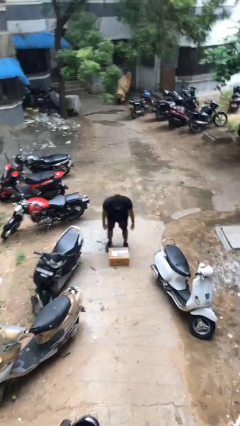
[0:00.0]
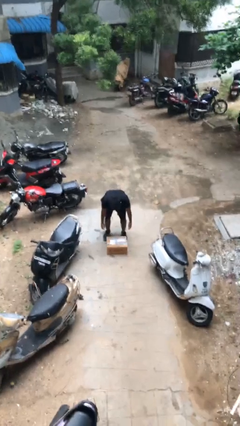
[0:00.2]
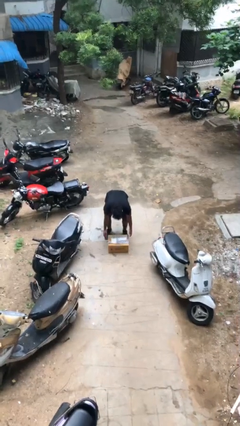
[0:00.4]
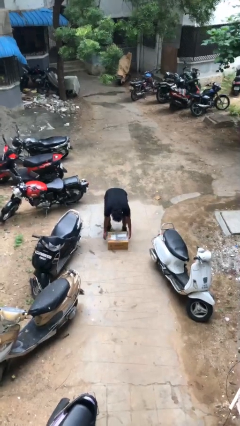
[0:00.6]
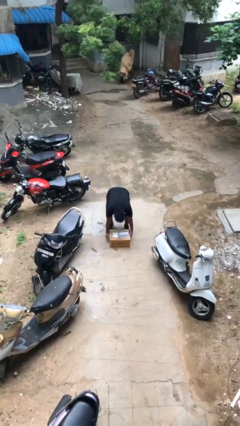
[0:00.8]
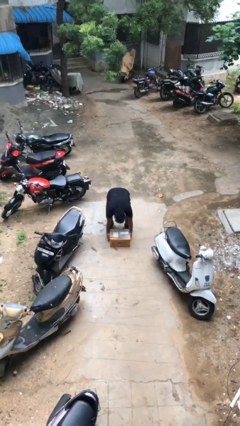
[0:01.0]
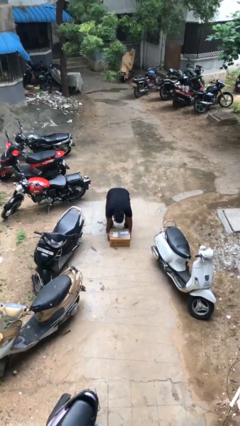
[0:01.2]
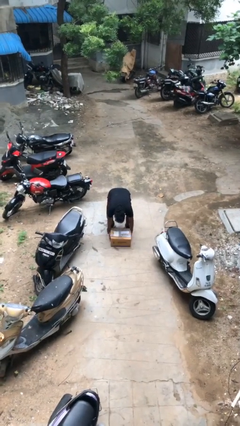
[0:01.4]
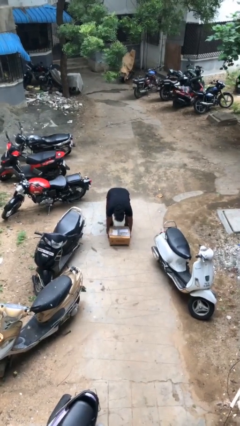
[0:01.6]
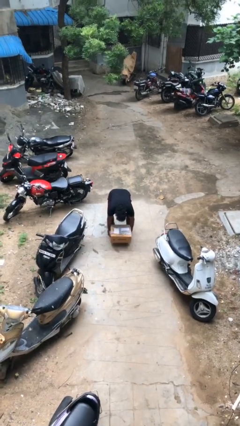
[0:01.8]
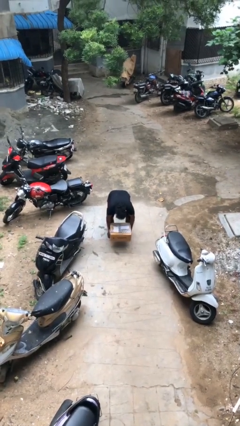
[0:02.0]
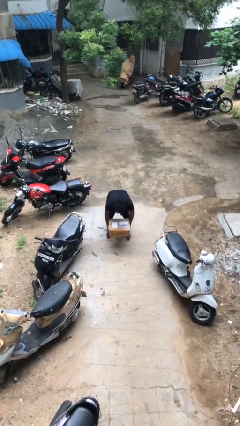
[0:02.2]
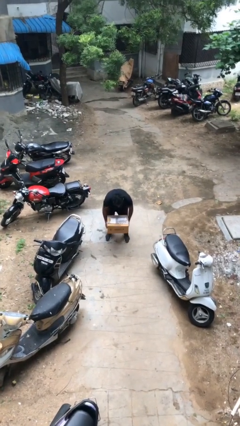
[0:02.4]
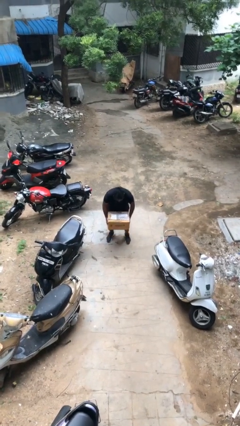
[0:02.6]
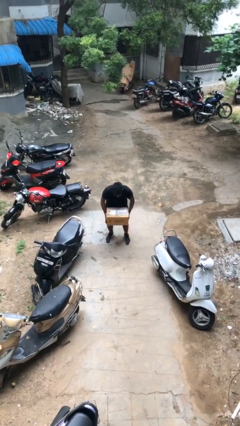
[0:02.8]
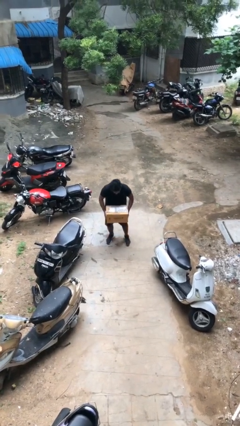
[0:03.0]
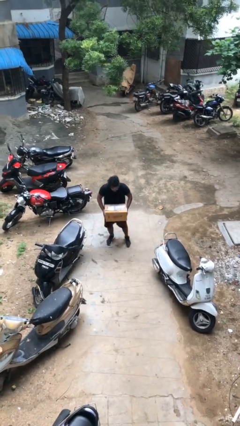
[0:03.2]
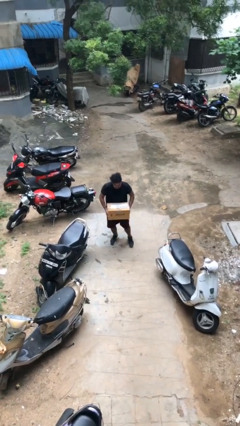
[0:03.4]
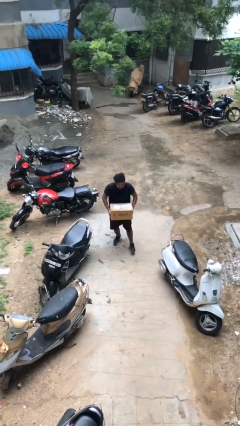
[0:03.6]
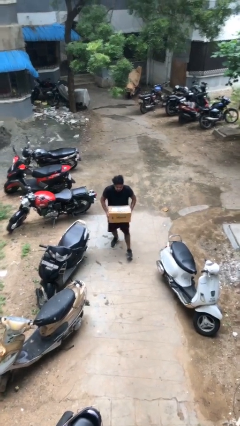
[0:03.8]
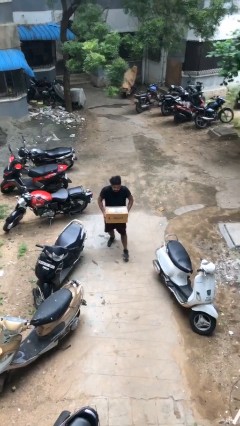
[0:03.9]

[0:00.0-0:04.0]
person picks up object from floor

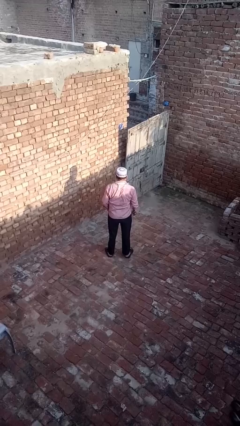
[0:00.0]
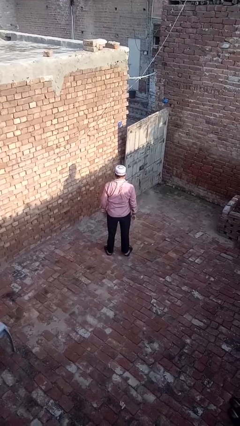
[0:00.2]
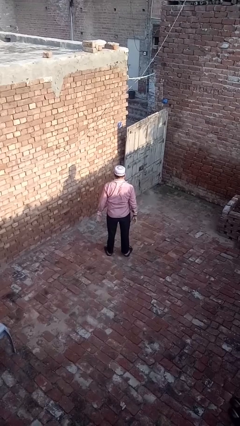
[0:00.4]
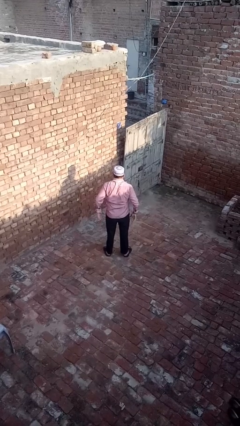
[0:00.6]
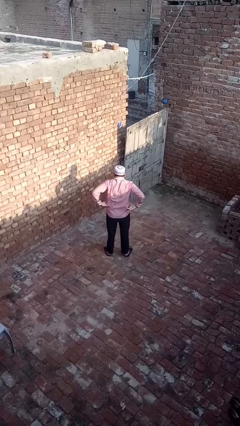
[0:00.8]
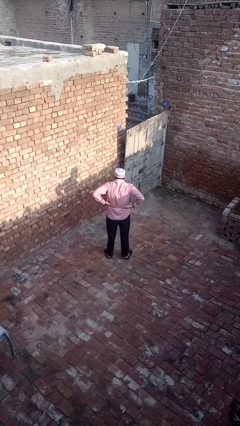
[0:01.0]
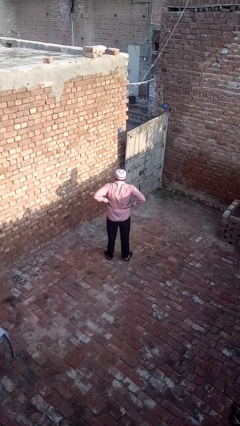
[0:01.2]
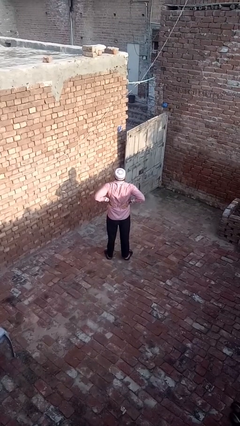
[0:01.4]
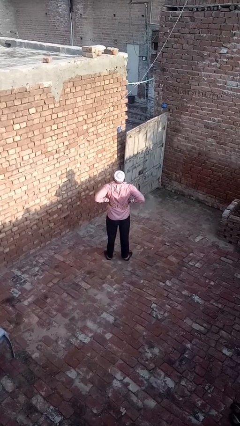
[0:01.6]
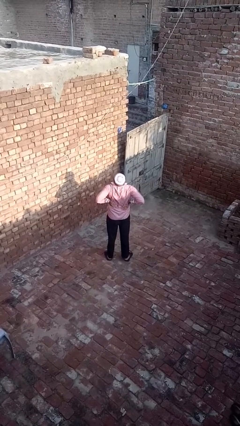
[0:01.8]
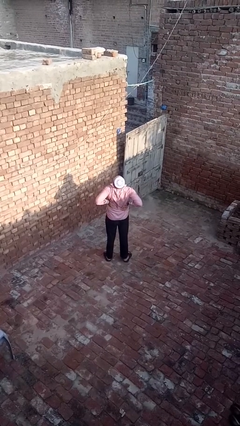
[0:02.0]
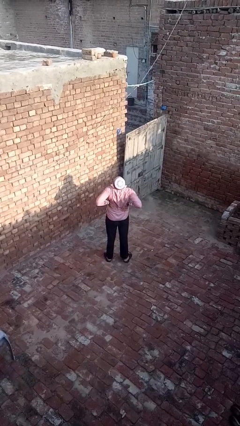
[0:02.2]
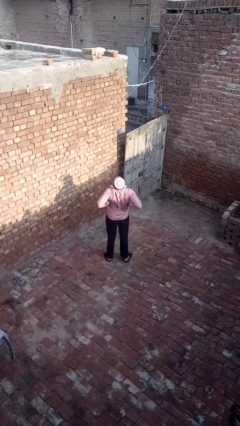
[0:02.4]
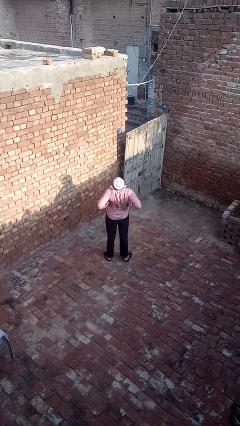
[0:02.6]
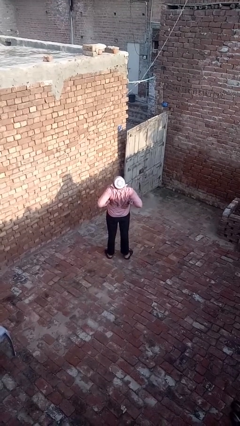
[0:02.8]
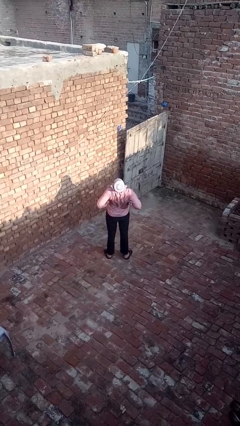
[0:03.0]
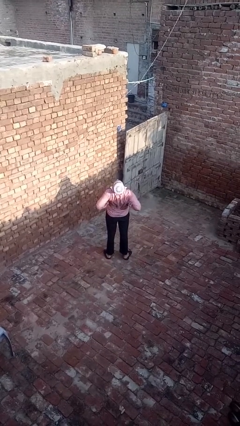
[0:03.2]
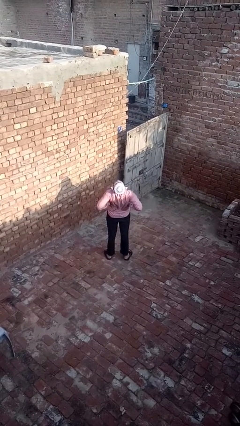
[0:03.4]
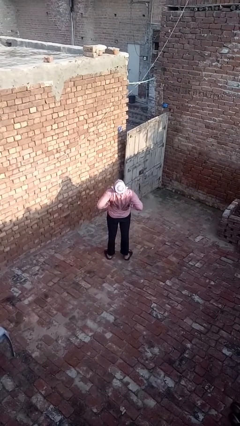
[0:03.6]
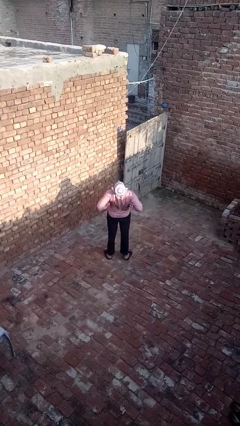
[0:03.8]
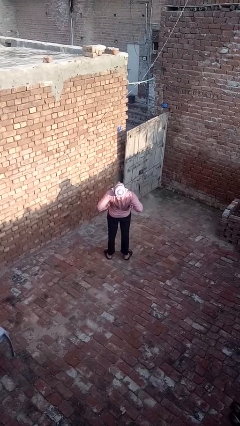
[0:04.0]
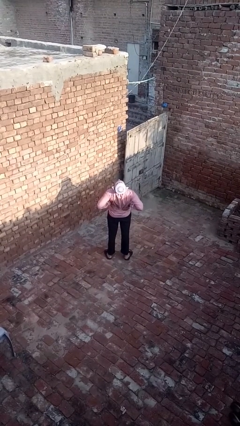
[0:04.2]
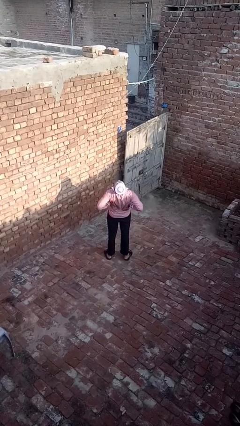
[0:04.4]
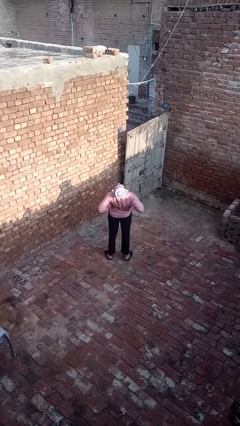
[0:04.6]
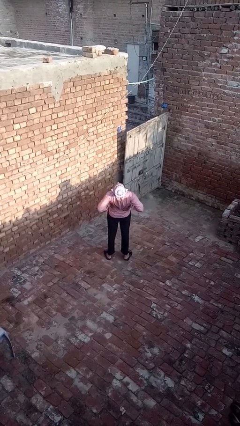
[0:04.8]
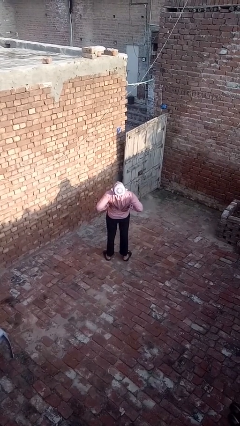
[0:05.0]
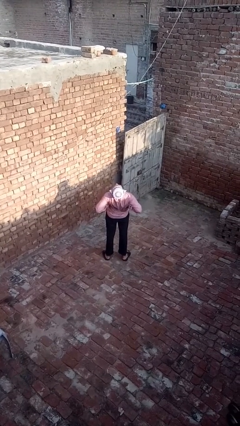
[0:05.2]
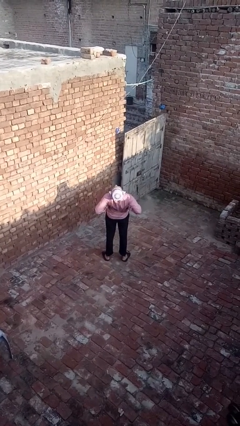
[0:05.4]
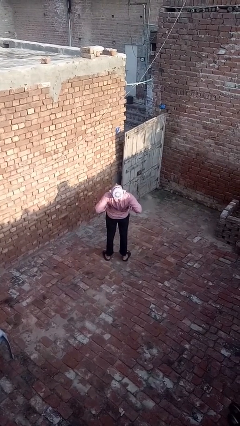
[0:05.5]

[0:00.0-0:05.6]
person stretches back

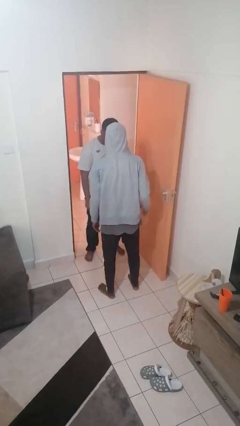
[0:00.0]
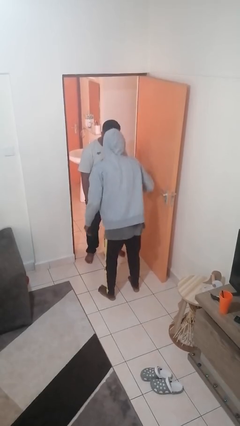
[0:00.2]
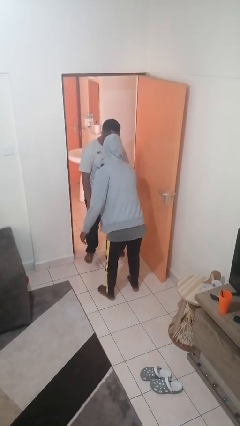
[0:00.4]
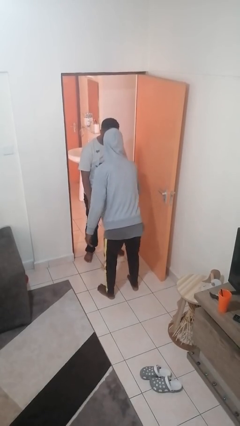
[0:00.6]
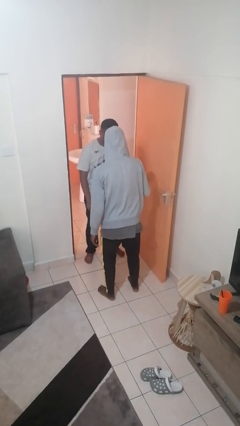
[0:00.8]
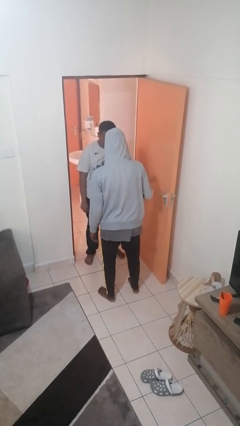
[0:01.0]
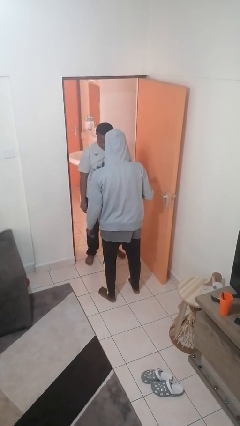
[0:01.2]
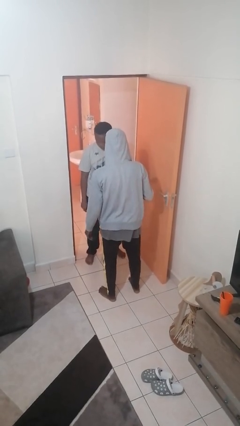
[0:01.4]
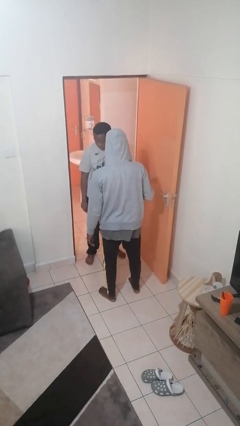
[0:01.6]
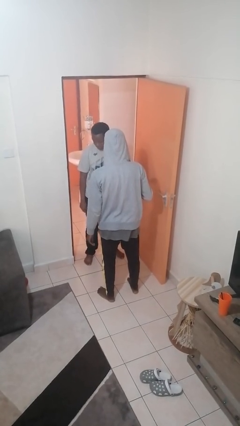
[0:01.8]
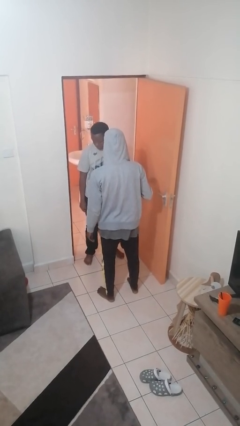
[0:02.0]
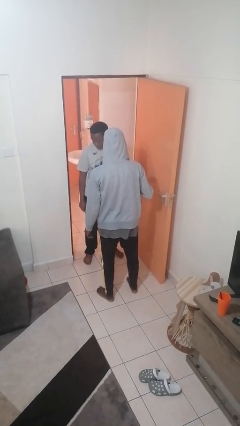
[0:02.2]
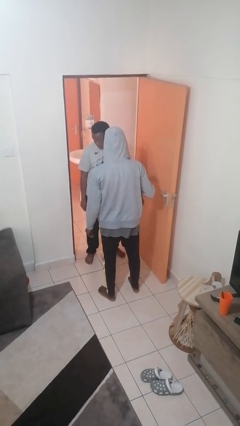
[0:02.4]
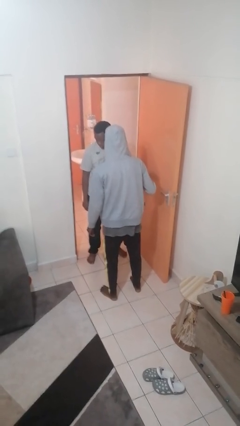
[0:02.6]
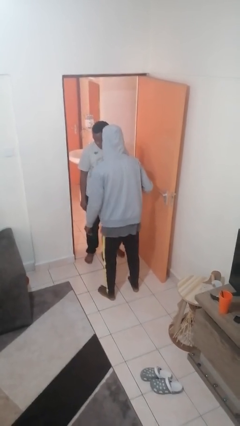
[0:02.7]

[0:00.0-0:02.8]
person grabs person by forearm

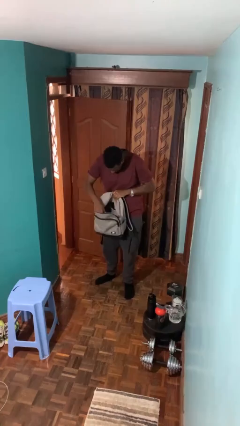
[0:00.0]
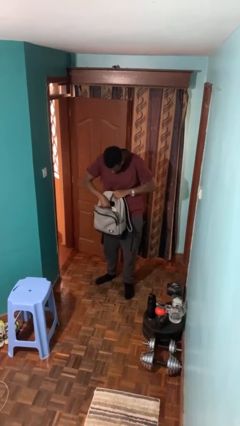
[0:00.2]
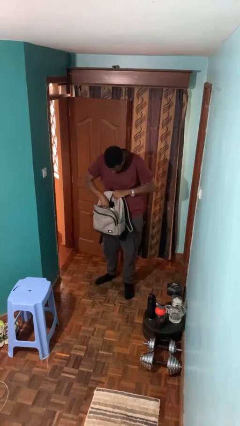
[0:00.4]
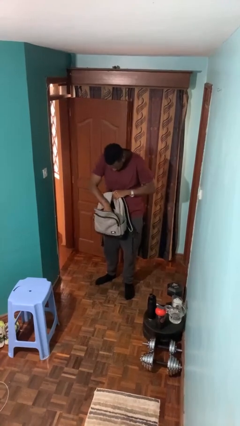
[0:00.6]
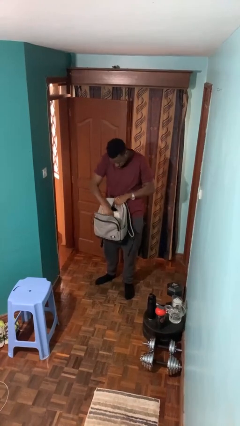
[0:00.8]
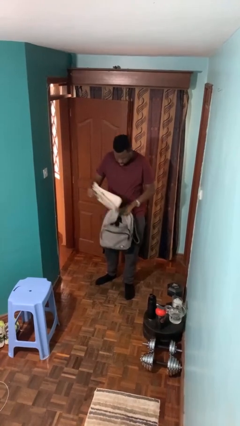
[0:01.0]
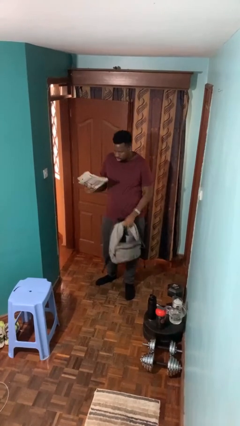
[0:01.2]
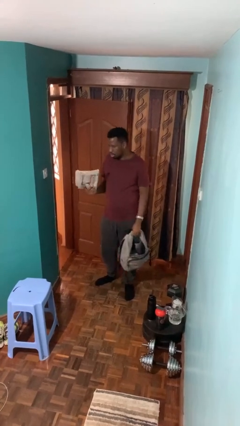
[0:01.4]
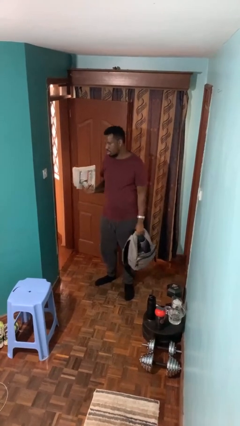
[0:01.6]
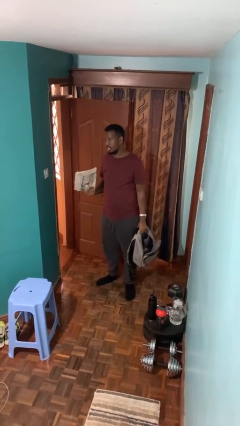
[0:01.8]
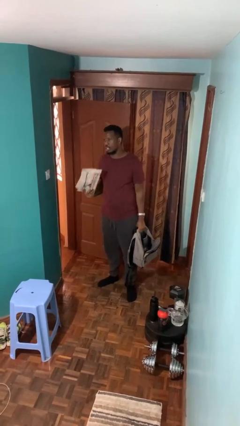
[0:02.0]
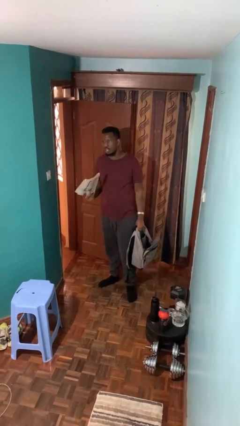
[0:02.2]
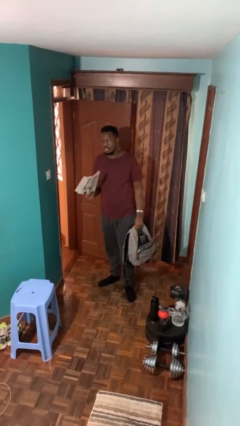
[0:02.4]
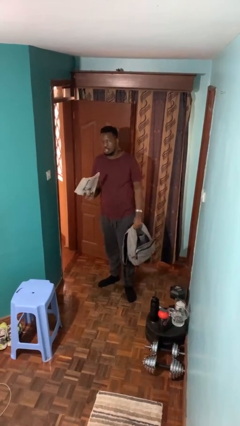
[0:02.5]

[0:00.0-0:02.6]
person takes object from backpack

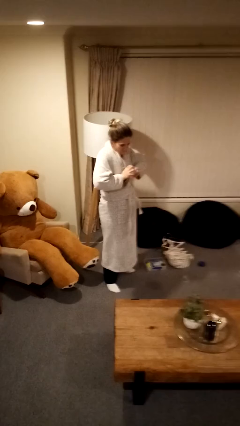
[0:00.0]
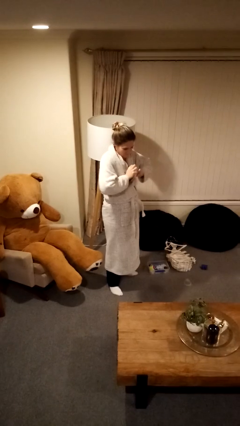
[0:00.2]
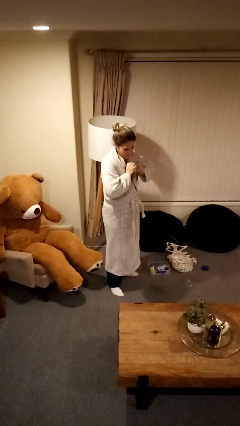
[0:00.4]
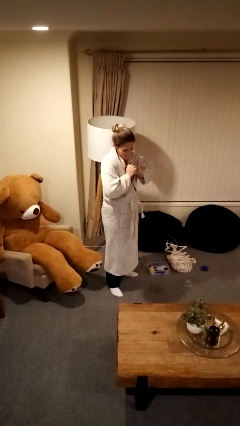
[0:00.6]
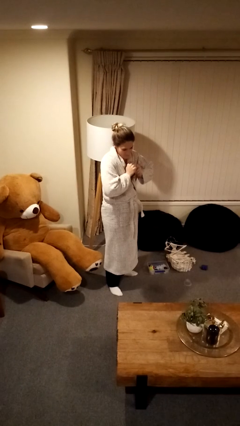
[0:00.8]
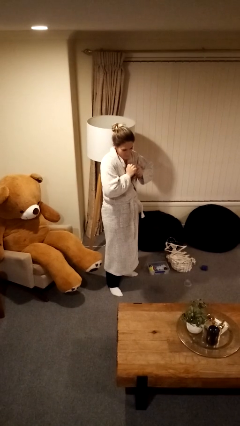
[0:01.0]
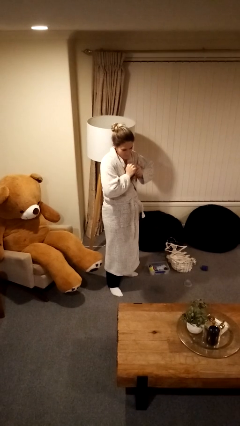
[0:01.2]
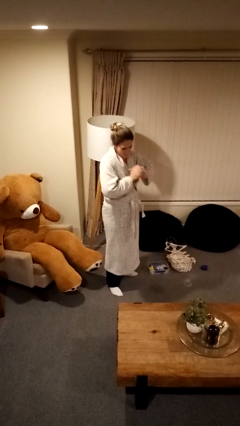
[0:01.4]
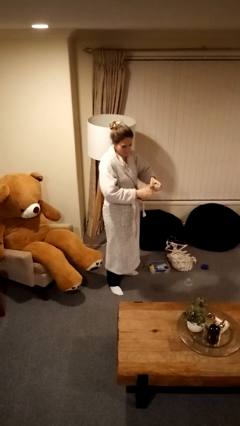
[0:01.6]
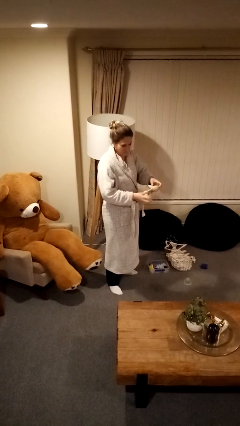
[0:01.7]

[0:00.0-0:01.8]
person squeezes object

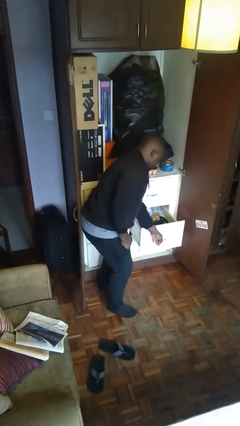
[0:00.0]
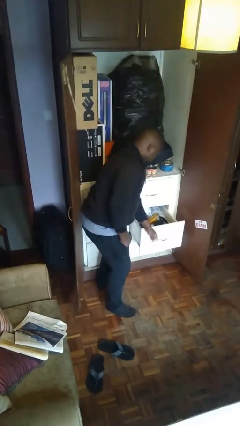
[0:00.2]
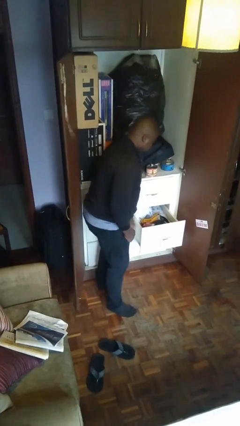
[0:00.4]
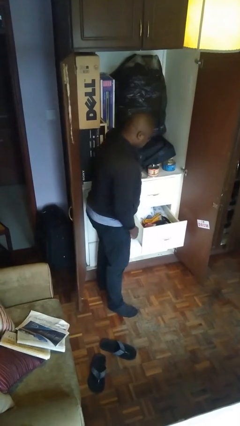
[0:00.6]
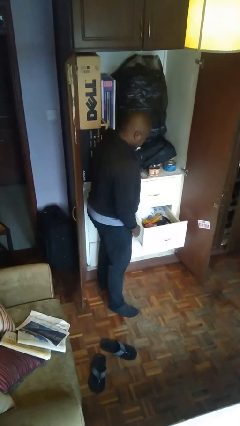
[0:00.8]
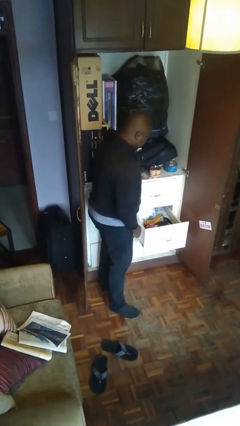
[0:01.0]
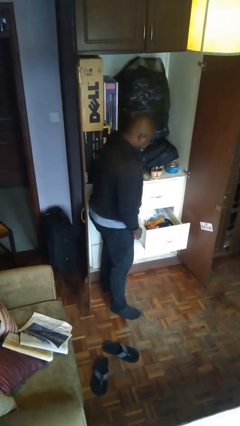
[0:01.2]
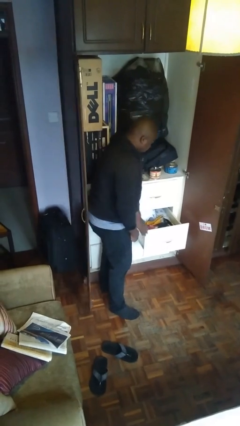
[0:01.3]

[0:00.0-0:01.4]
person opens dresser drawer
